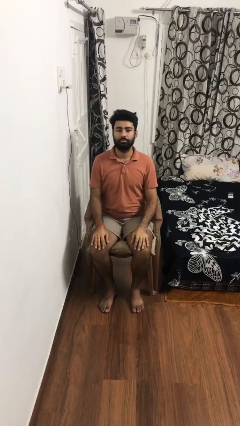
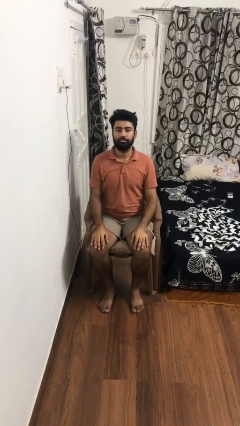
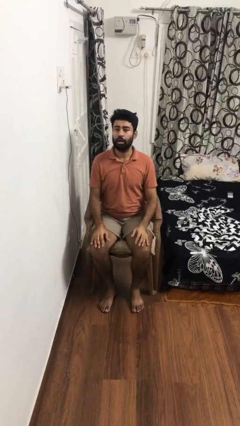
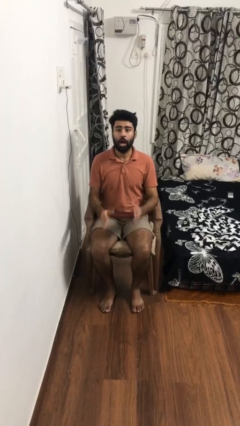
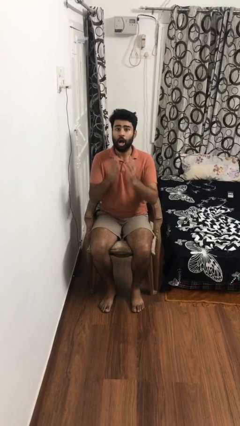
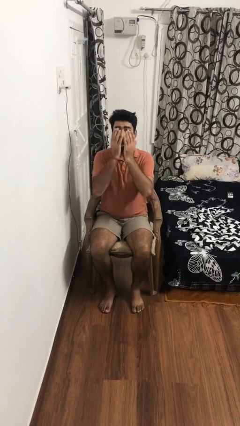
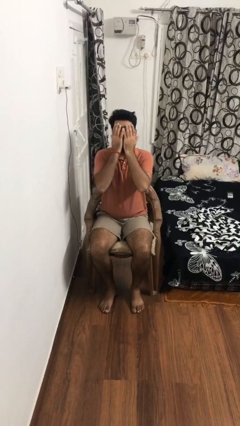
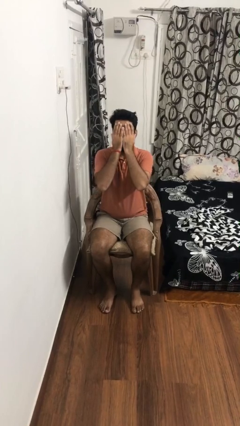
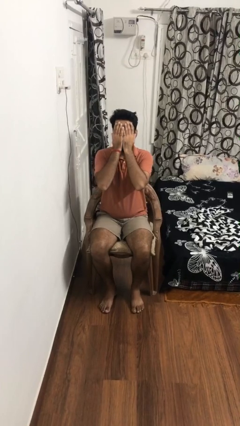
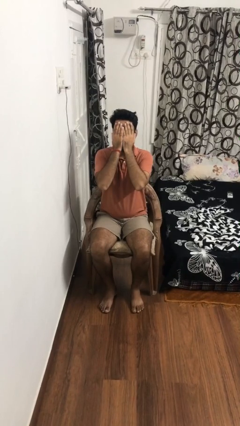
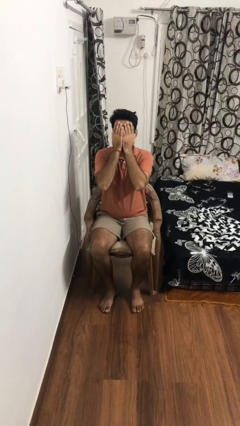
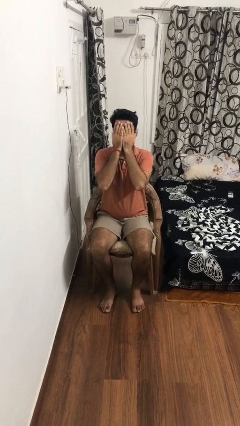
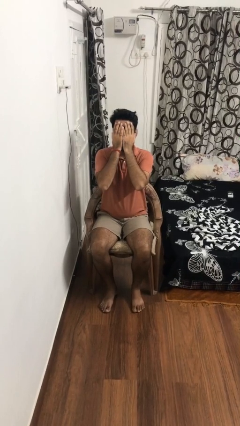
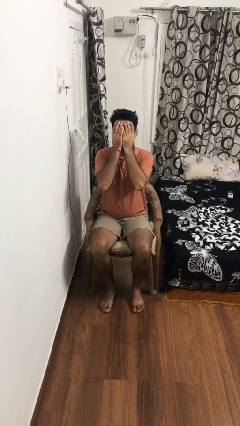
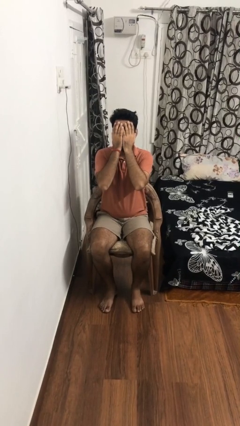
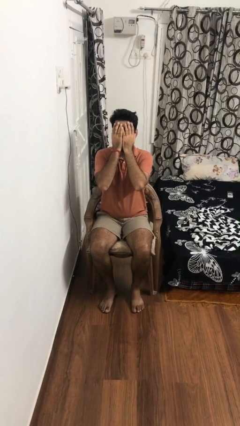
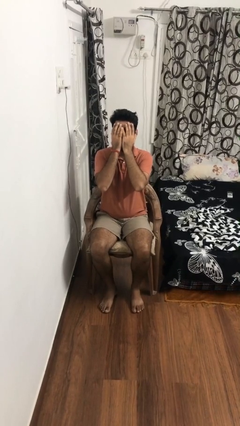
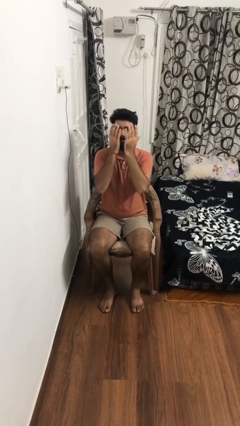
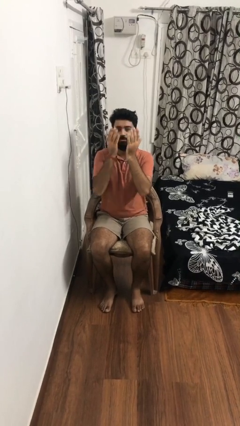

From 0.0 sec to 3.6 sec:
person covers face with hands

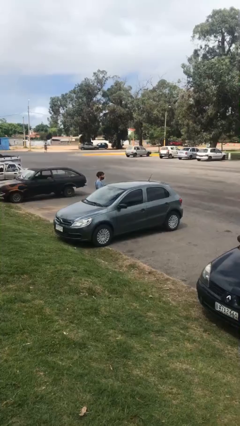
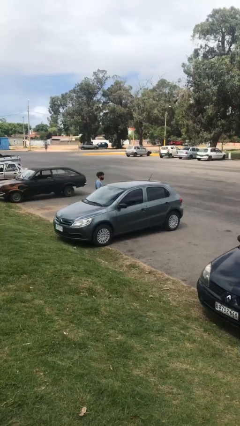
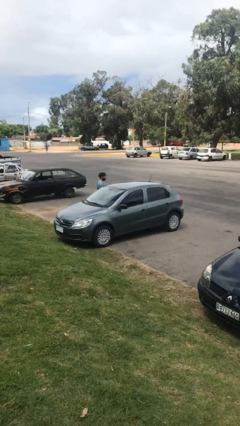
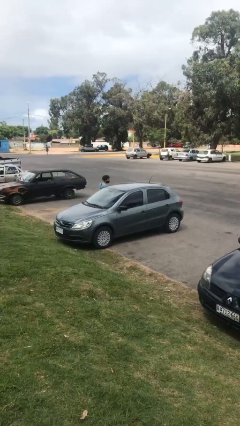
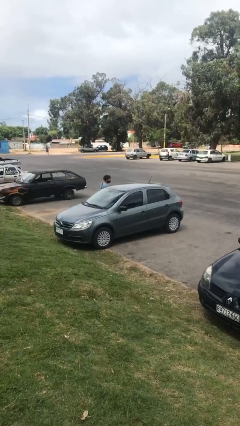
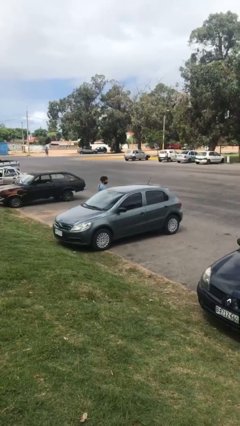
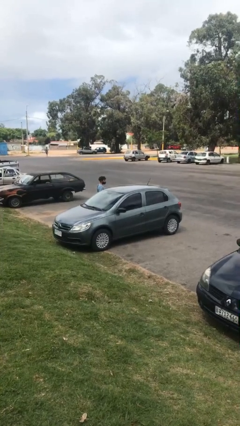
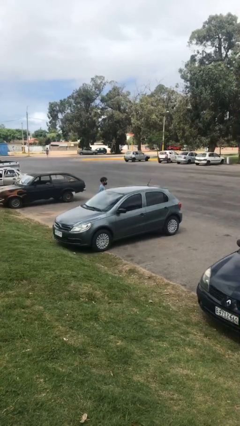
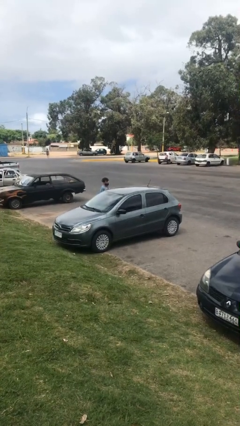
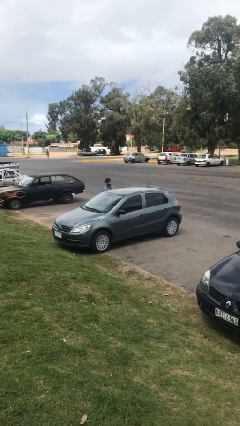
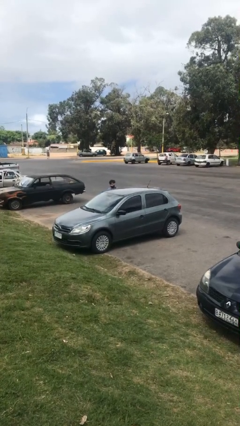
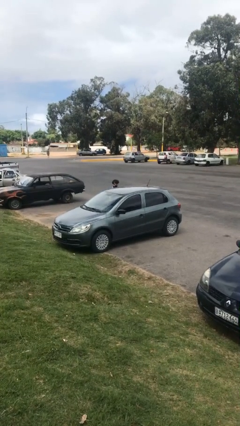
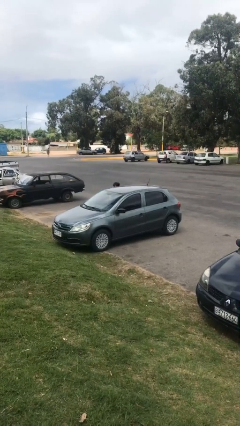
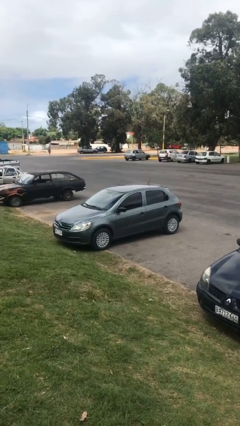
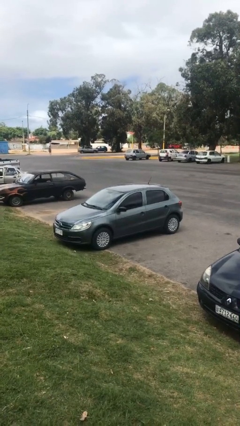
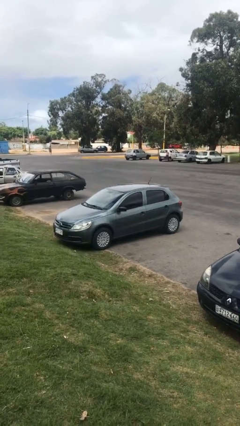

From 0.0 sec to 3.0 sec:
car picks up person

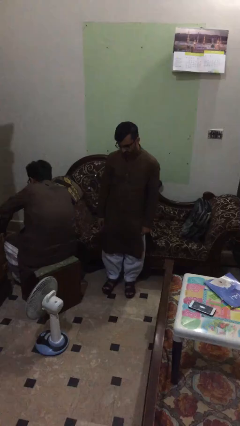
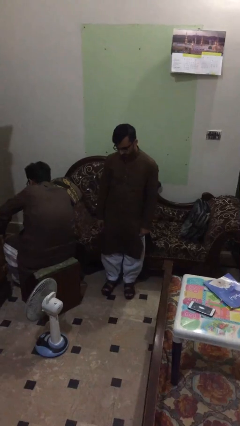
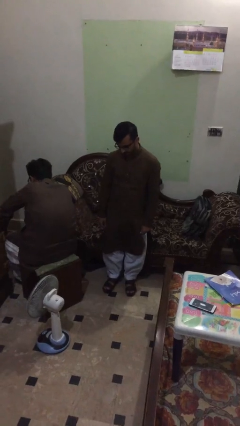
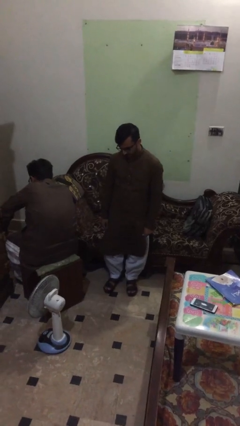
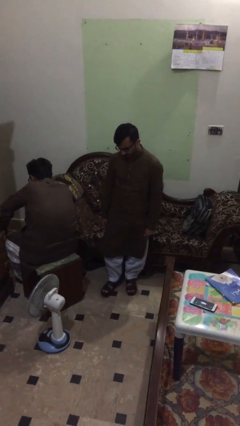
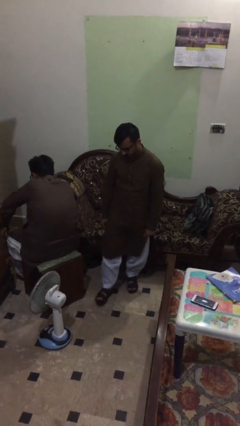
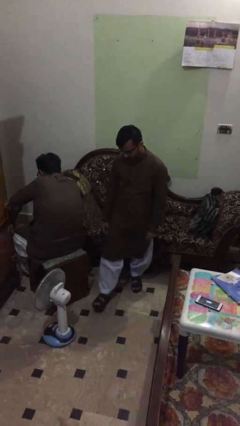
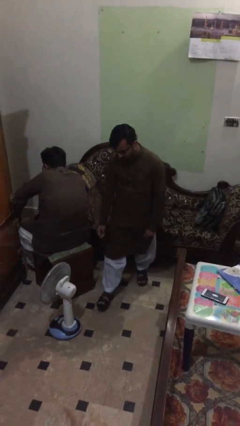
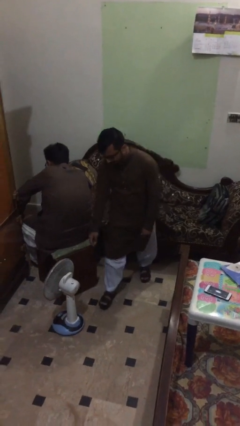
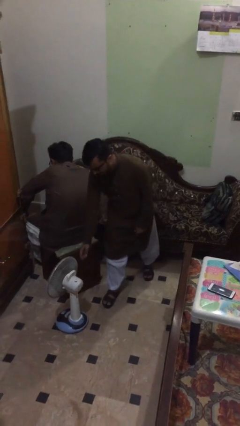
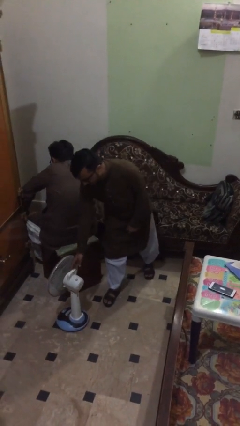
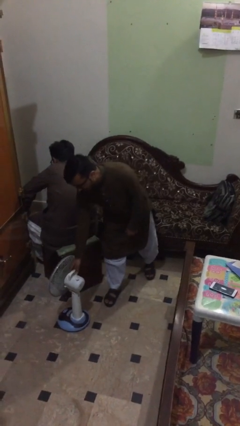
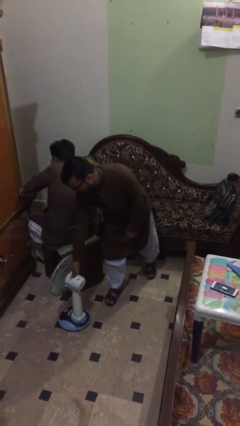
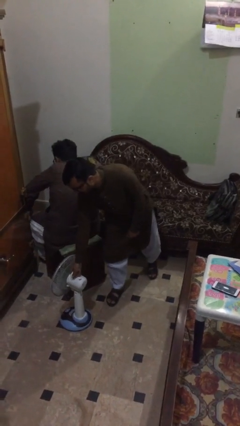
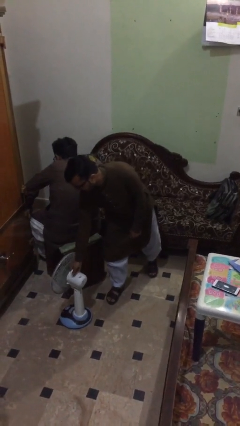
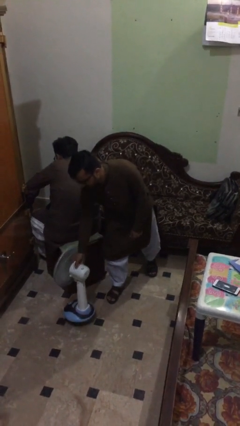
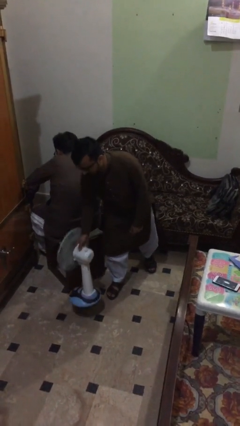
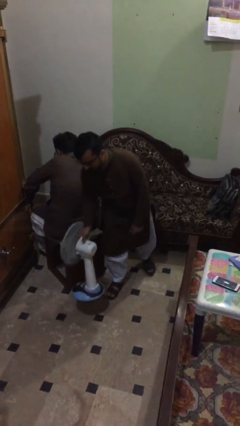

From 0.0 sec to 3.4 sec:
person steals object from person

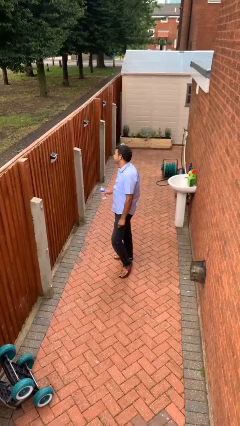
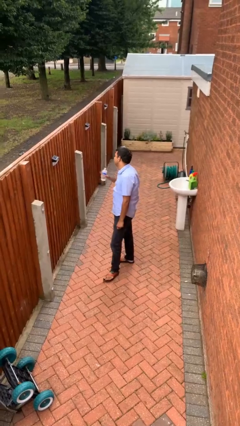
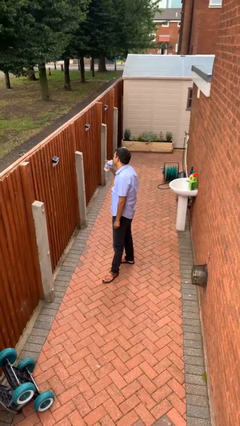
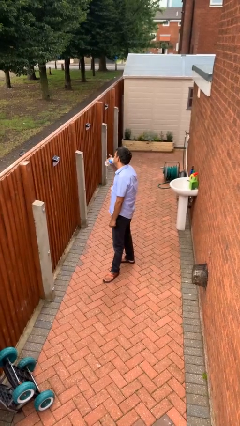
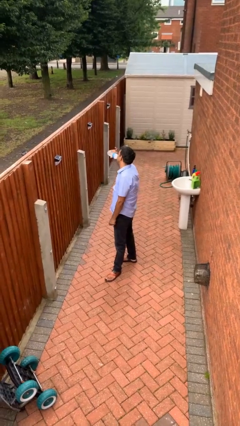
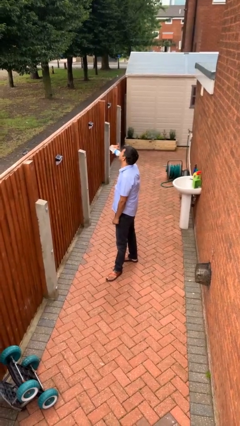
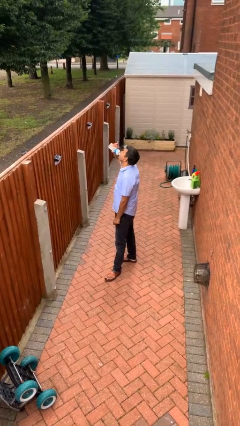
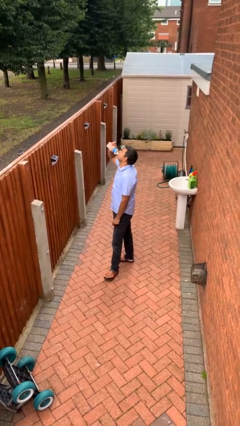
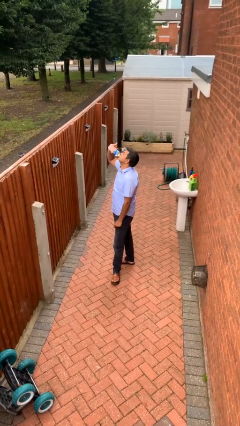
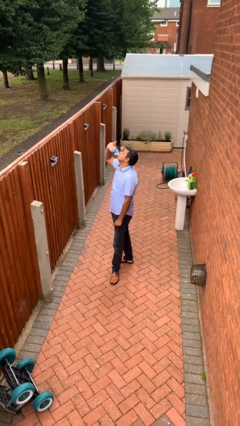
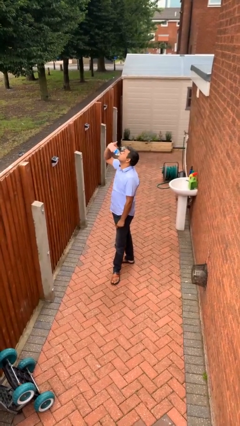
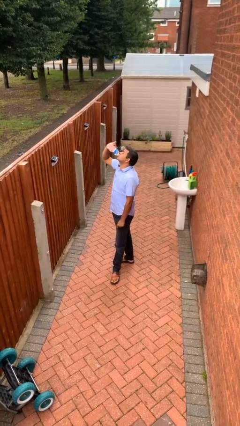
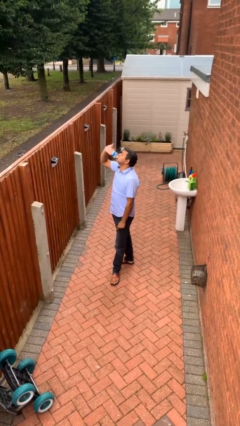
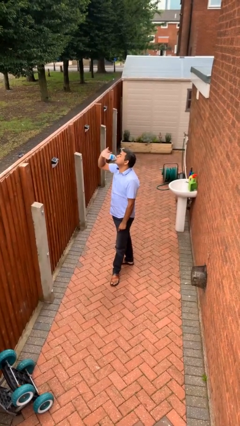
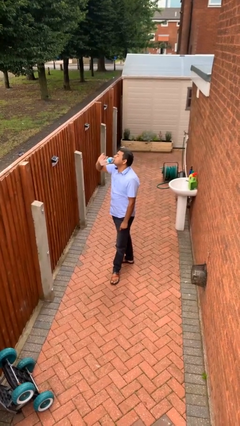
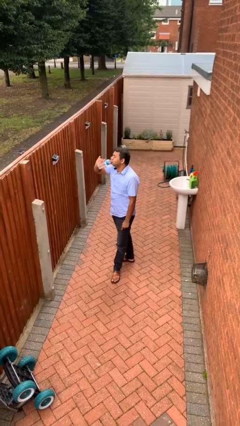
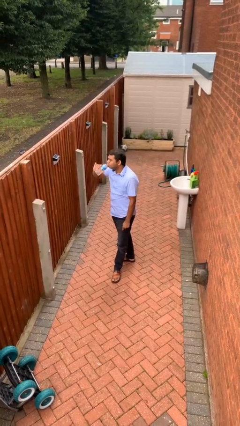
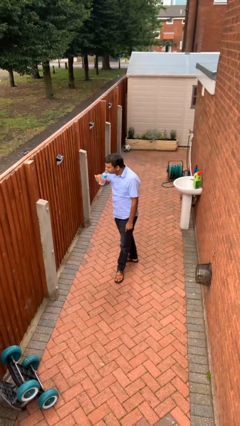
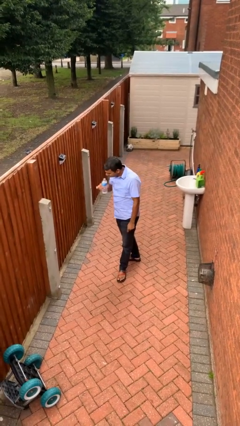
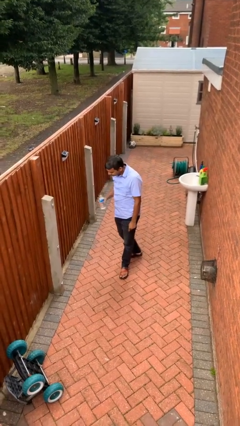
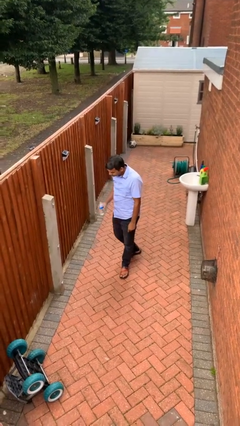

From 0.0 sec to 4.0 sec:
person drinks from bottle

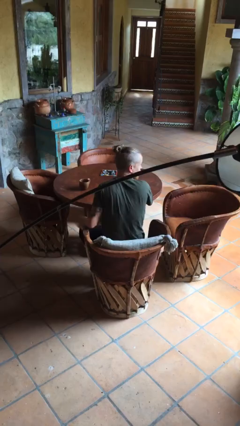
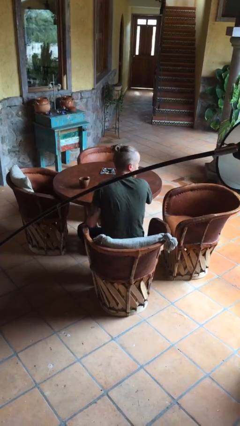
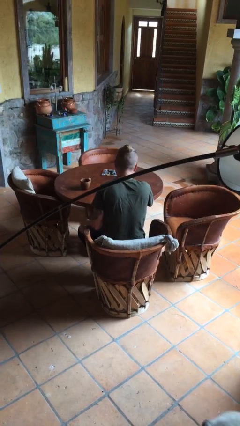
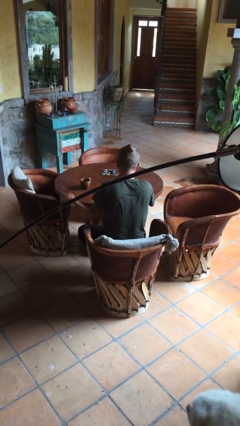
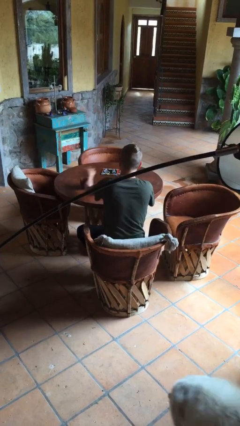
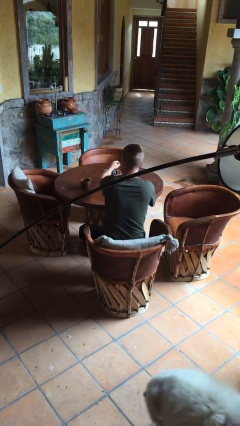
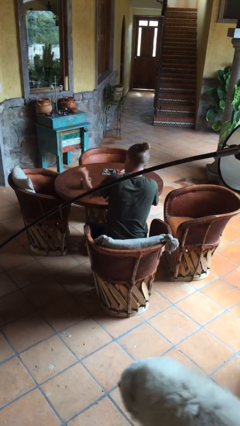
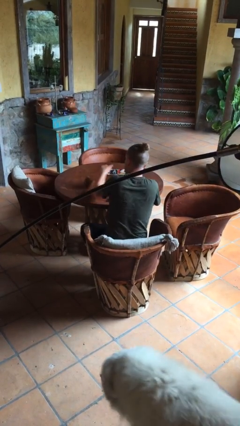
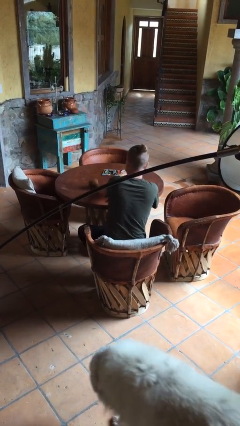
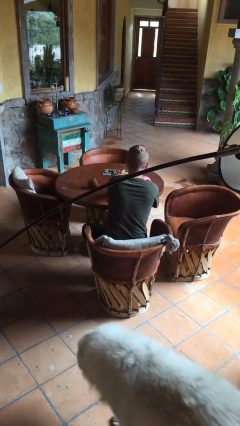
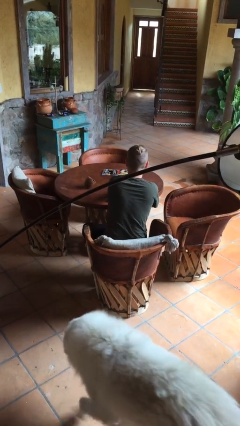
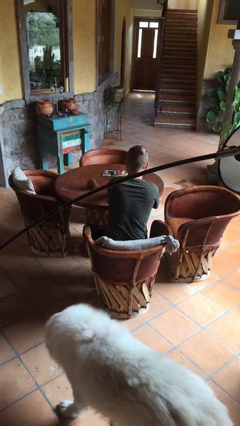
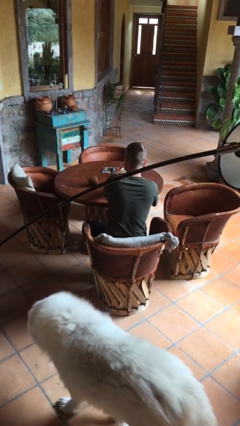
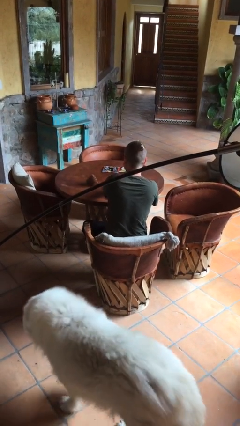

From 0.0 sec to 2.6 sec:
person knocks over glass

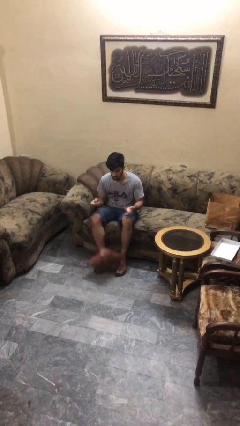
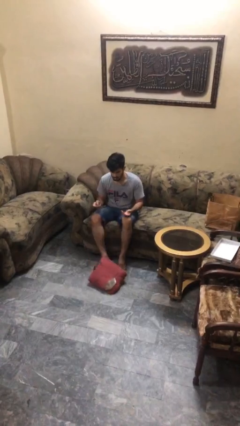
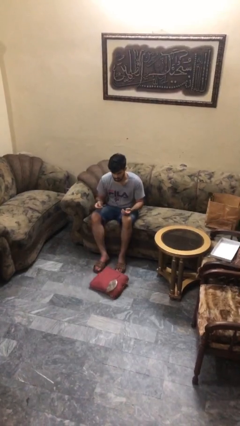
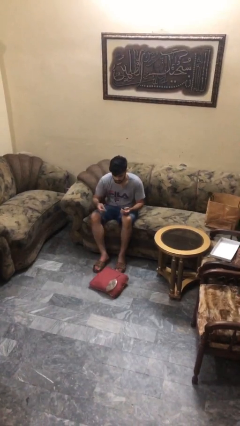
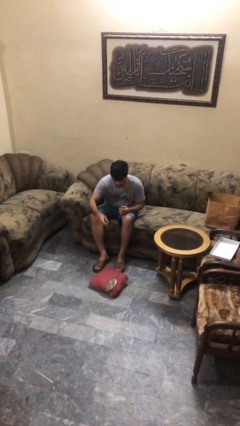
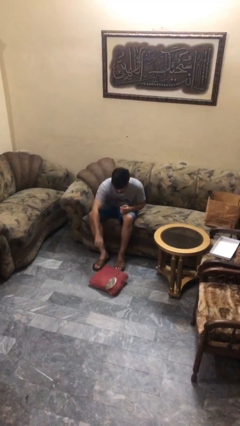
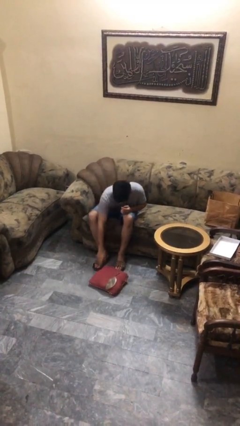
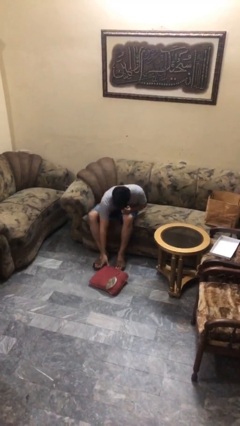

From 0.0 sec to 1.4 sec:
person drops object
